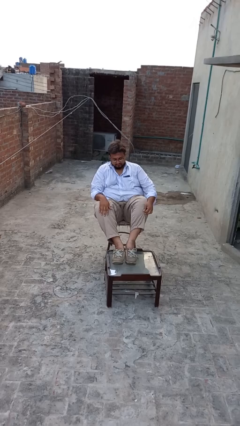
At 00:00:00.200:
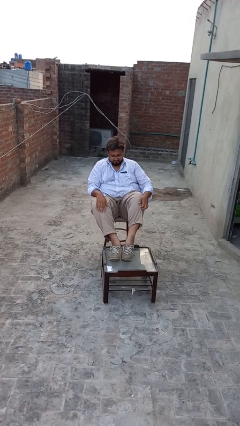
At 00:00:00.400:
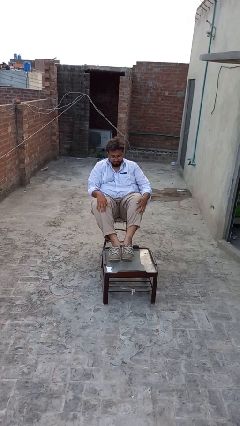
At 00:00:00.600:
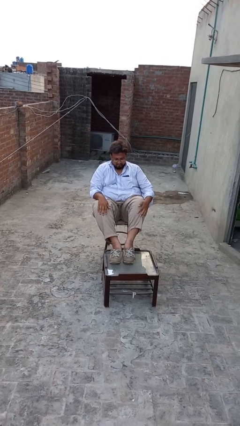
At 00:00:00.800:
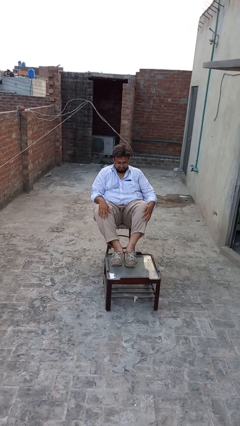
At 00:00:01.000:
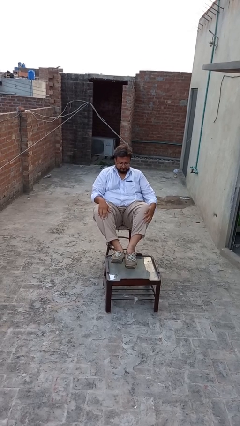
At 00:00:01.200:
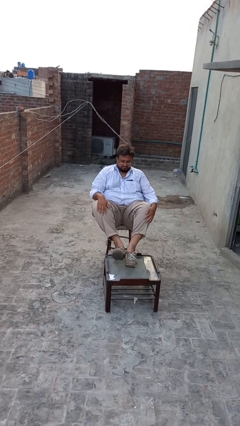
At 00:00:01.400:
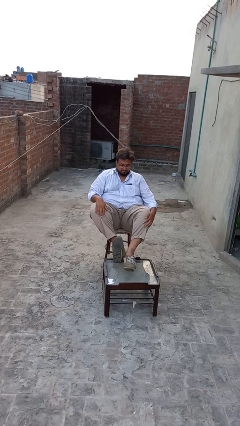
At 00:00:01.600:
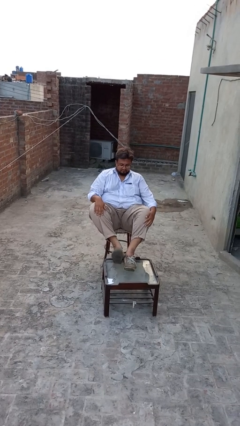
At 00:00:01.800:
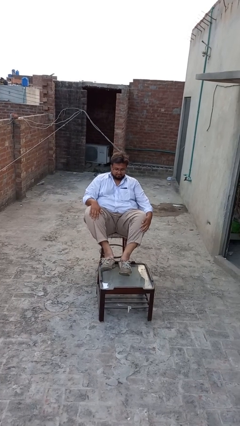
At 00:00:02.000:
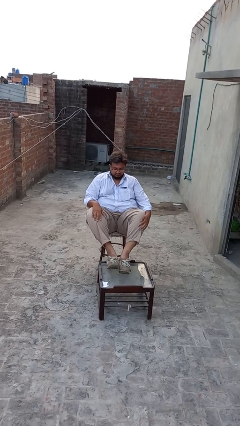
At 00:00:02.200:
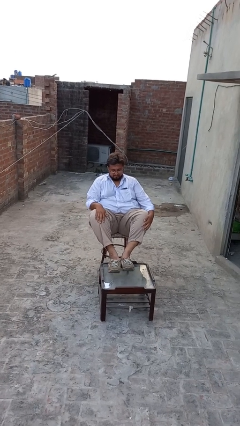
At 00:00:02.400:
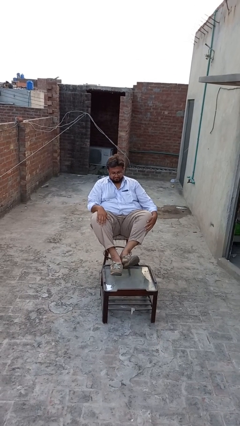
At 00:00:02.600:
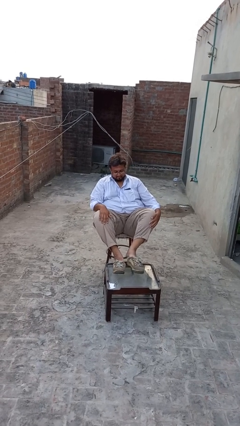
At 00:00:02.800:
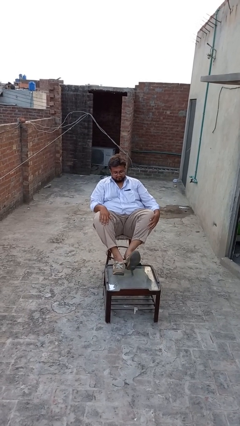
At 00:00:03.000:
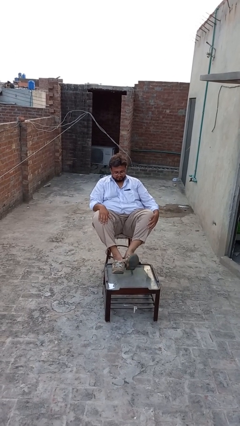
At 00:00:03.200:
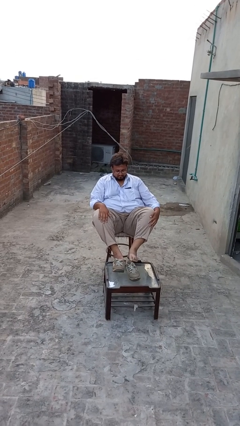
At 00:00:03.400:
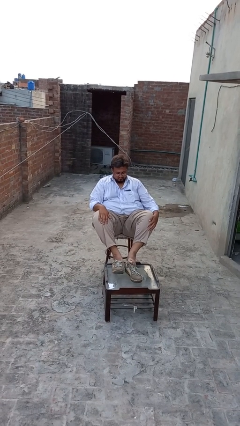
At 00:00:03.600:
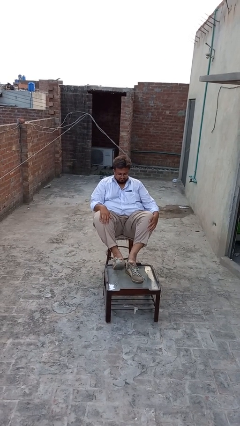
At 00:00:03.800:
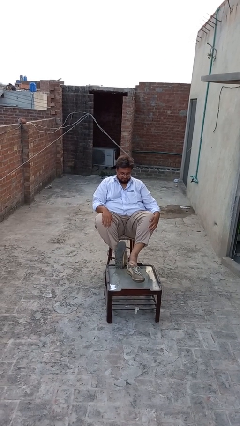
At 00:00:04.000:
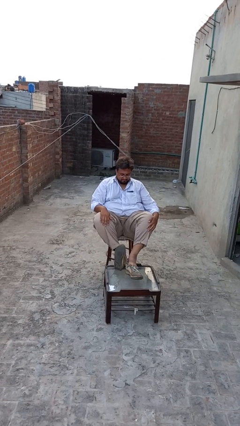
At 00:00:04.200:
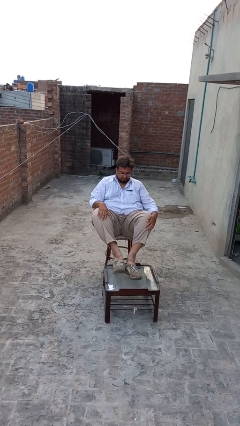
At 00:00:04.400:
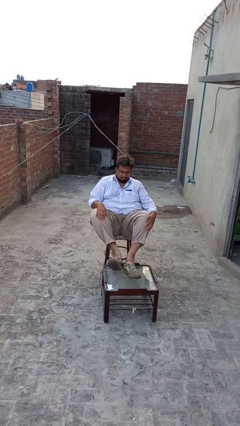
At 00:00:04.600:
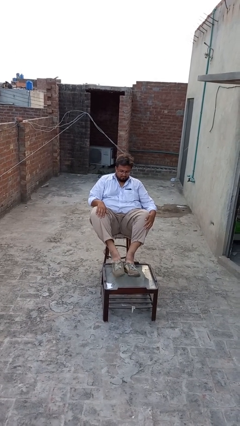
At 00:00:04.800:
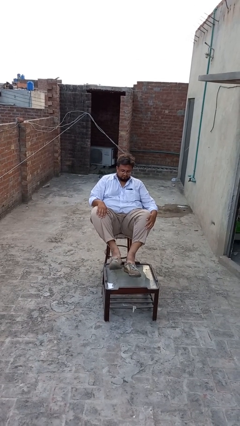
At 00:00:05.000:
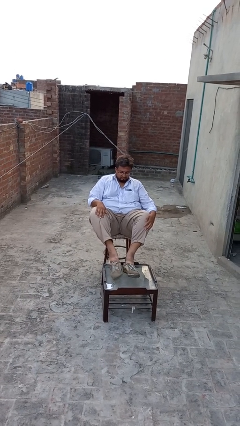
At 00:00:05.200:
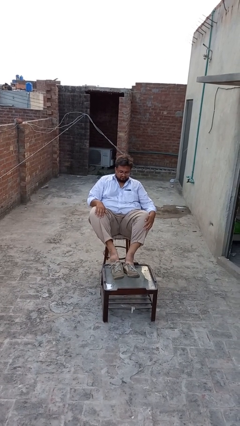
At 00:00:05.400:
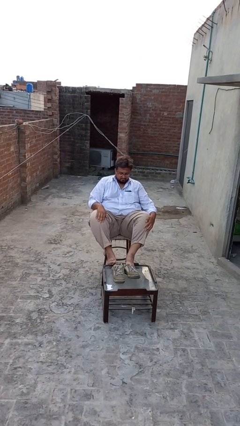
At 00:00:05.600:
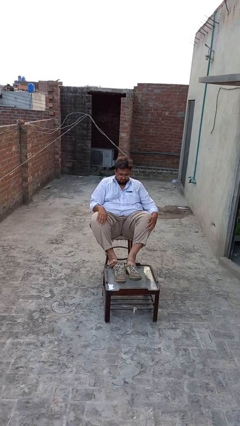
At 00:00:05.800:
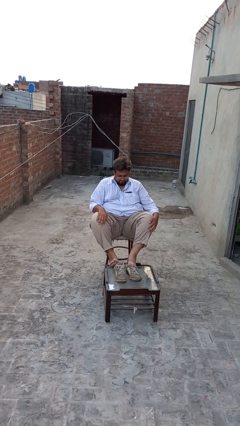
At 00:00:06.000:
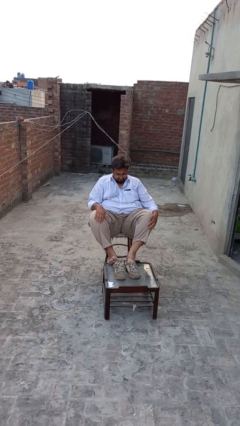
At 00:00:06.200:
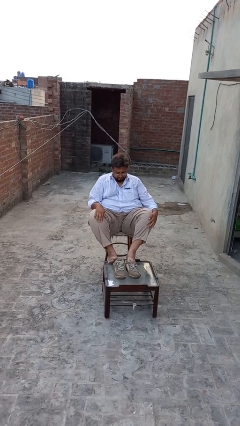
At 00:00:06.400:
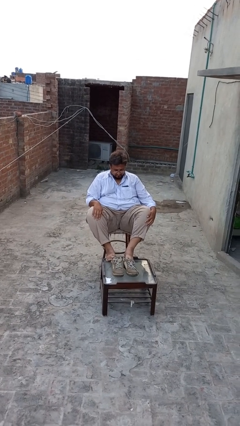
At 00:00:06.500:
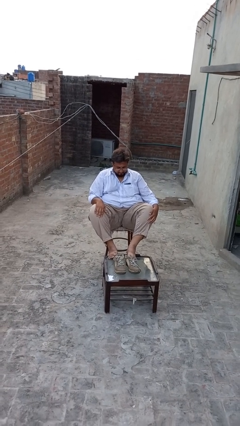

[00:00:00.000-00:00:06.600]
person takes off shoes

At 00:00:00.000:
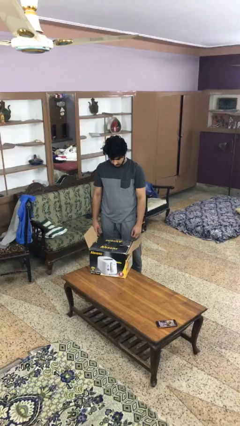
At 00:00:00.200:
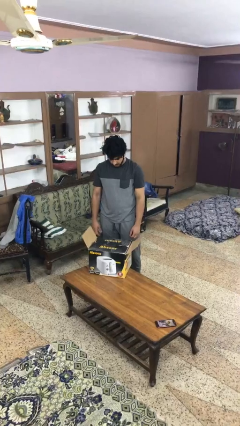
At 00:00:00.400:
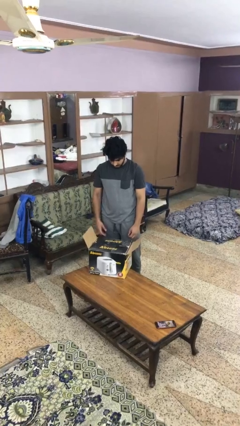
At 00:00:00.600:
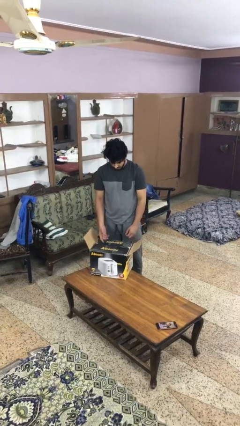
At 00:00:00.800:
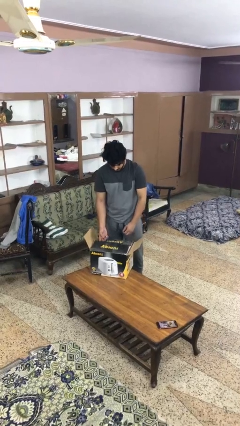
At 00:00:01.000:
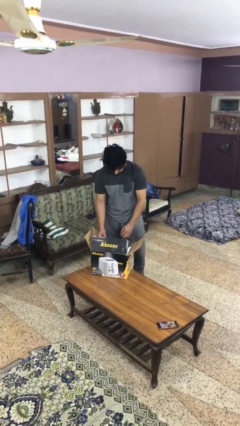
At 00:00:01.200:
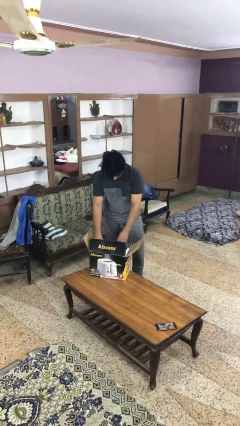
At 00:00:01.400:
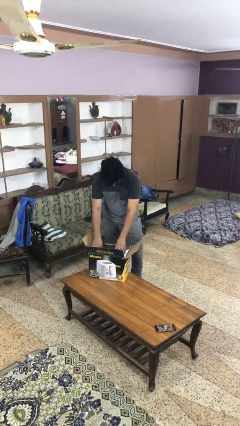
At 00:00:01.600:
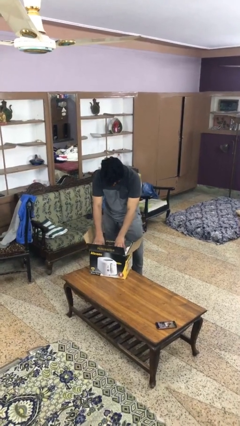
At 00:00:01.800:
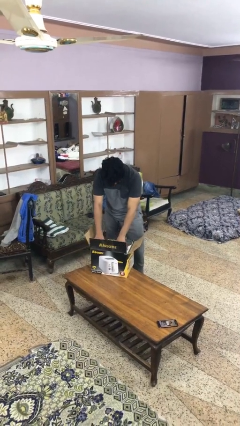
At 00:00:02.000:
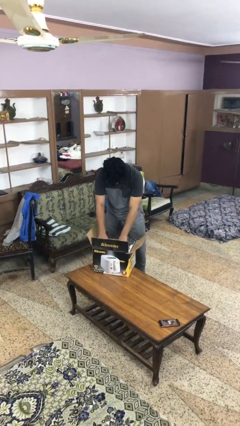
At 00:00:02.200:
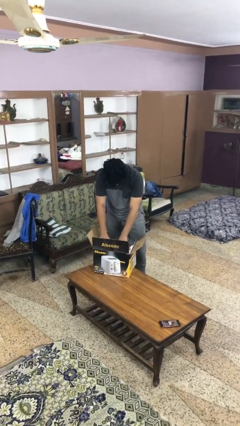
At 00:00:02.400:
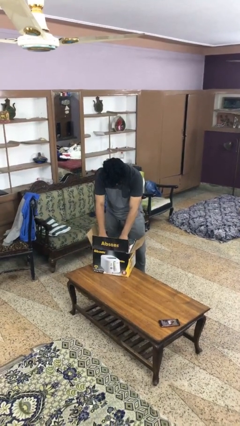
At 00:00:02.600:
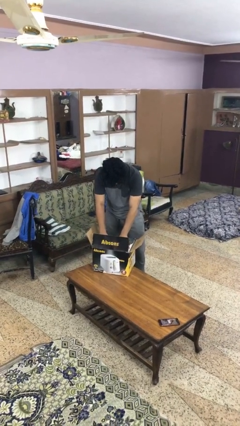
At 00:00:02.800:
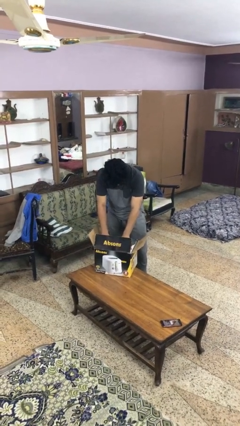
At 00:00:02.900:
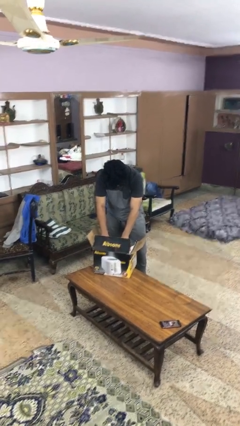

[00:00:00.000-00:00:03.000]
person searches in box

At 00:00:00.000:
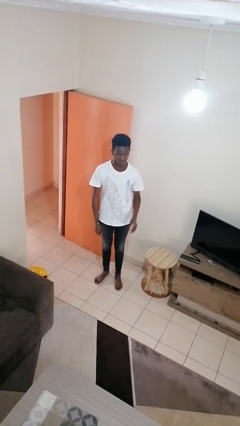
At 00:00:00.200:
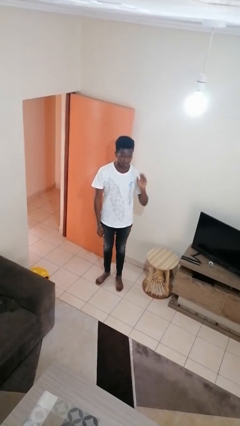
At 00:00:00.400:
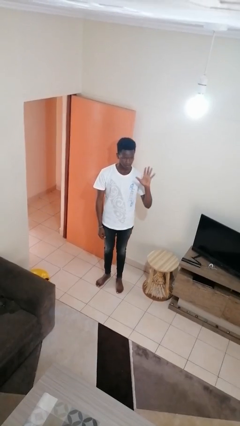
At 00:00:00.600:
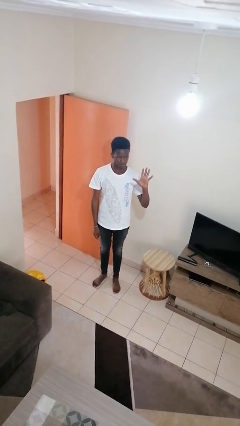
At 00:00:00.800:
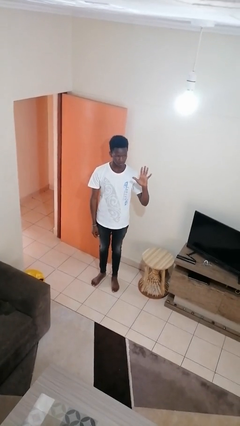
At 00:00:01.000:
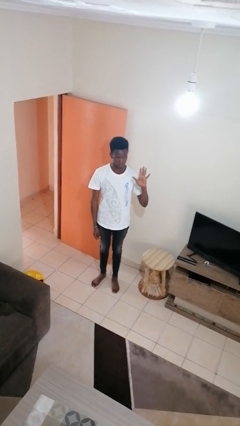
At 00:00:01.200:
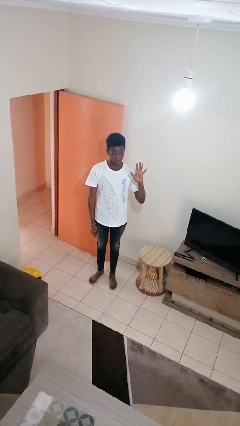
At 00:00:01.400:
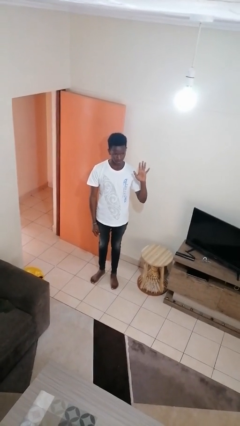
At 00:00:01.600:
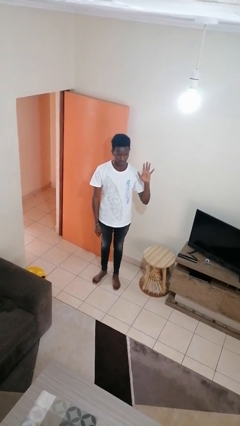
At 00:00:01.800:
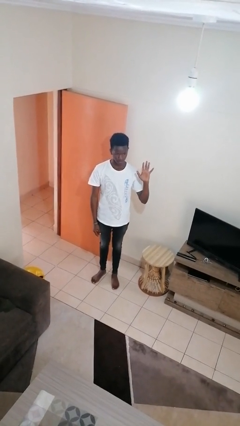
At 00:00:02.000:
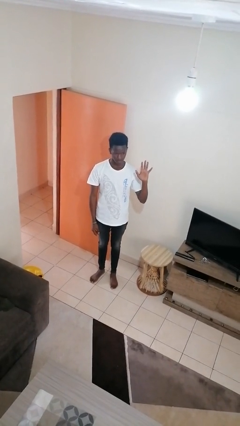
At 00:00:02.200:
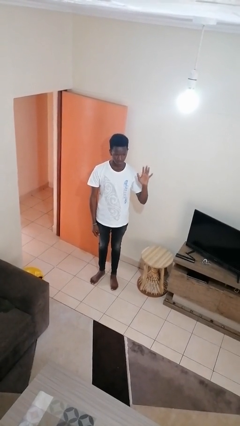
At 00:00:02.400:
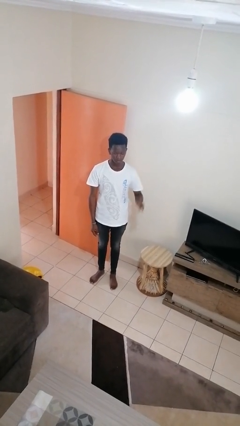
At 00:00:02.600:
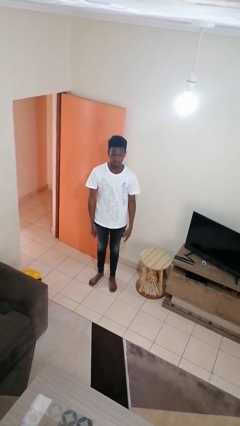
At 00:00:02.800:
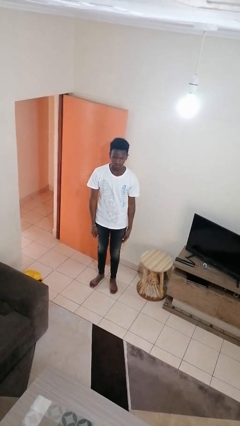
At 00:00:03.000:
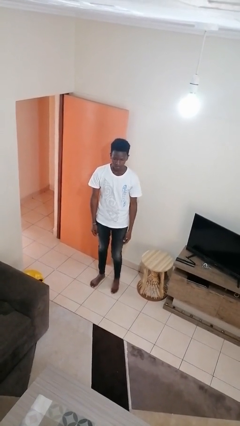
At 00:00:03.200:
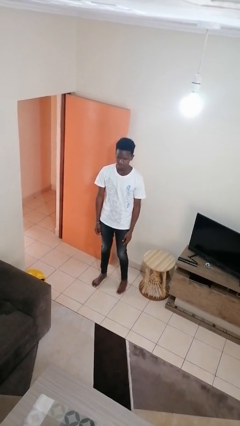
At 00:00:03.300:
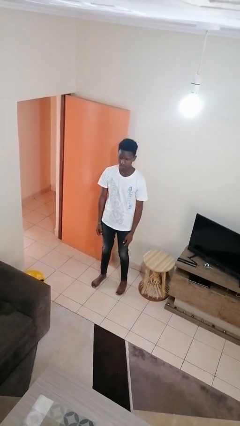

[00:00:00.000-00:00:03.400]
person gestures number five

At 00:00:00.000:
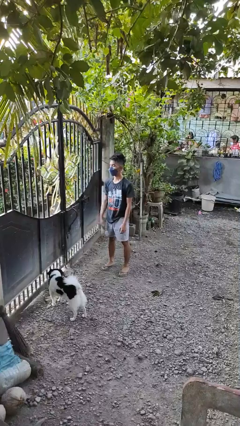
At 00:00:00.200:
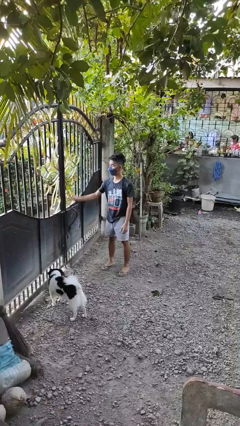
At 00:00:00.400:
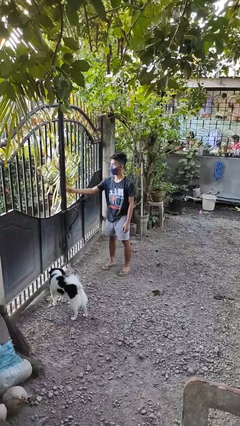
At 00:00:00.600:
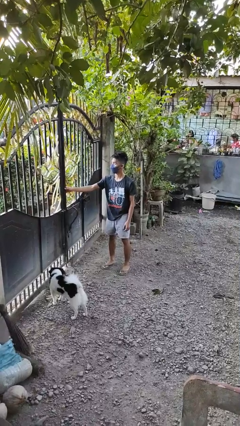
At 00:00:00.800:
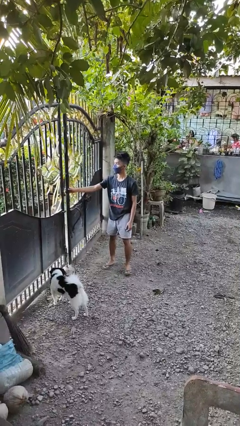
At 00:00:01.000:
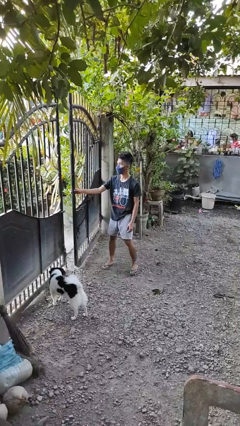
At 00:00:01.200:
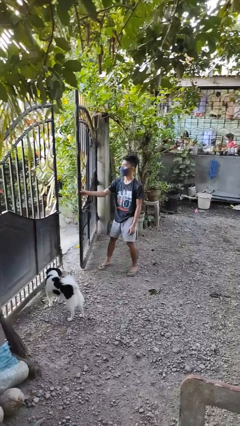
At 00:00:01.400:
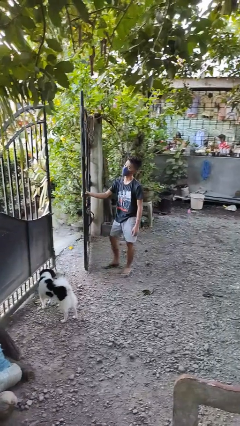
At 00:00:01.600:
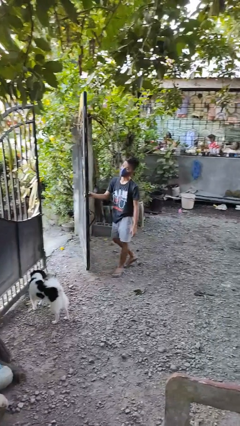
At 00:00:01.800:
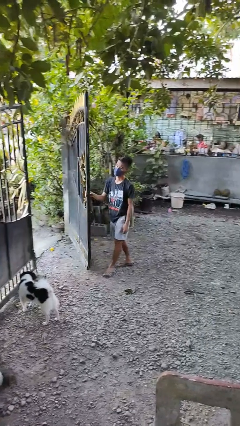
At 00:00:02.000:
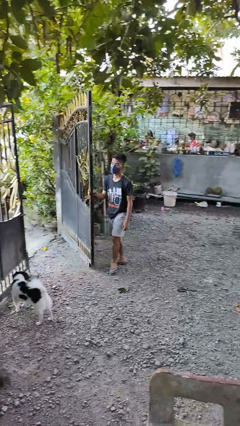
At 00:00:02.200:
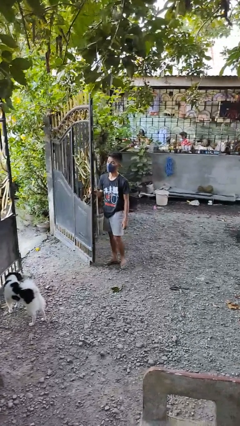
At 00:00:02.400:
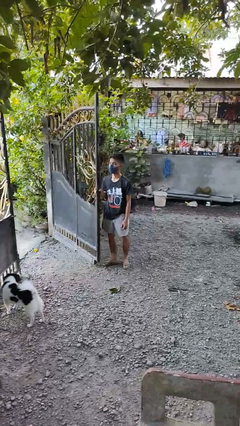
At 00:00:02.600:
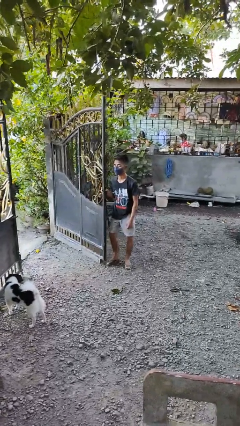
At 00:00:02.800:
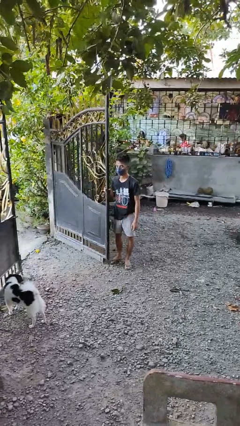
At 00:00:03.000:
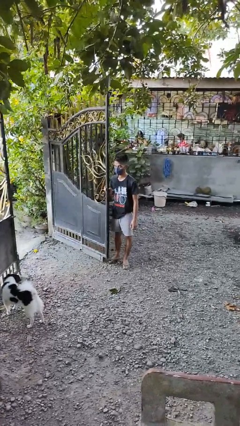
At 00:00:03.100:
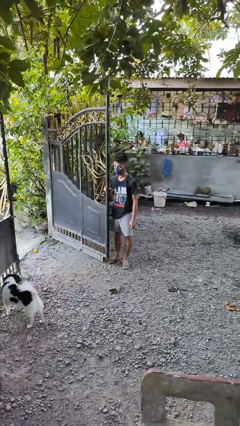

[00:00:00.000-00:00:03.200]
person opens gate

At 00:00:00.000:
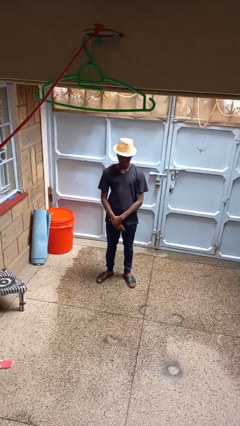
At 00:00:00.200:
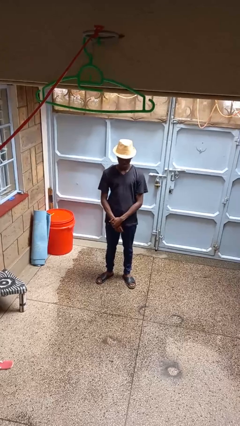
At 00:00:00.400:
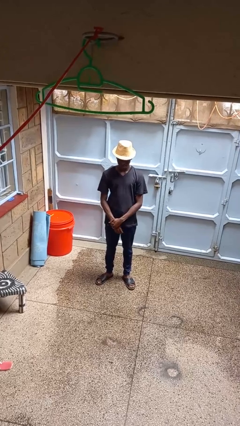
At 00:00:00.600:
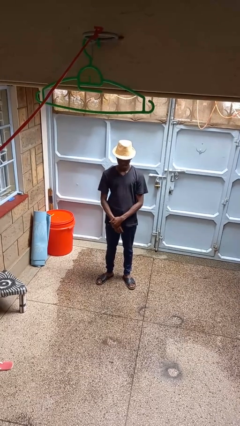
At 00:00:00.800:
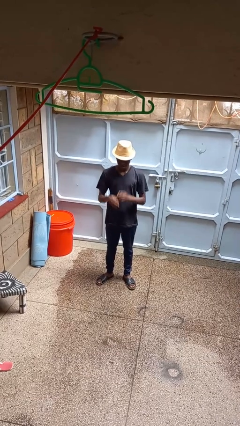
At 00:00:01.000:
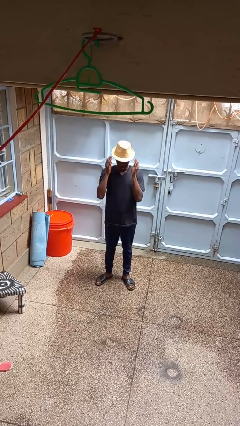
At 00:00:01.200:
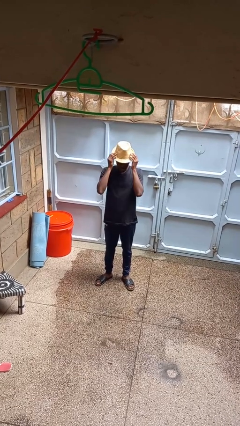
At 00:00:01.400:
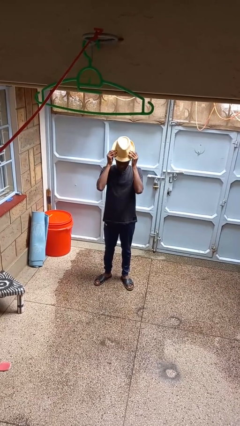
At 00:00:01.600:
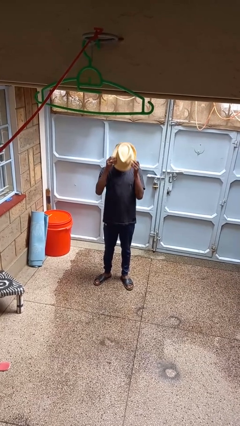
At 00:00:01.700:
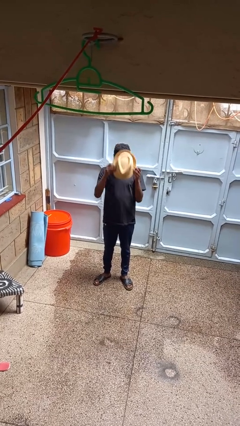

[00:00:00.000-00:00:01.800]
person takes off hat
